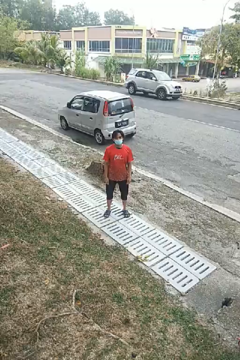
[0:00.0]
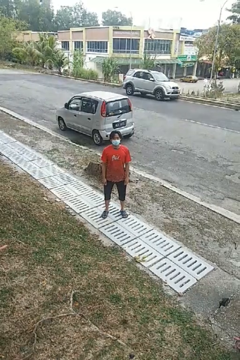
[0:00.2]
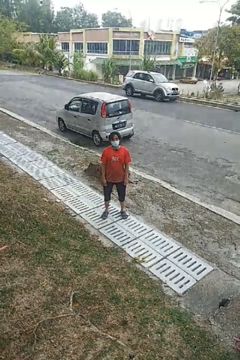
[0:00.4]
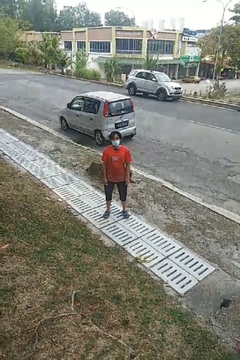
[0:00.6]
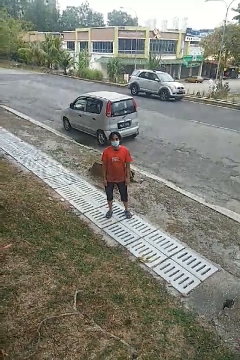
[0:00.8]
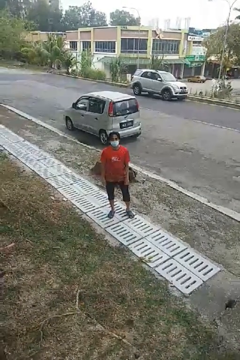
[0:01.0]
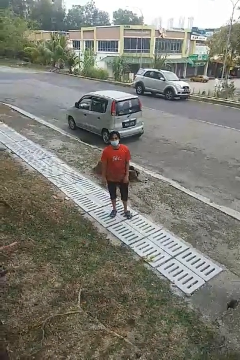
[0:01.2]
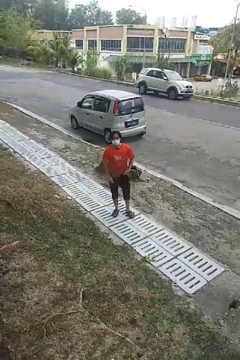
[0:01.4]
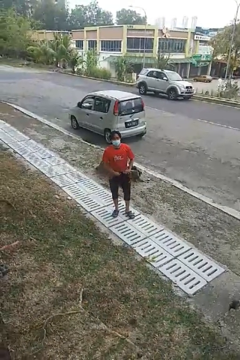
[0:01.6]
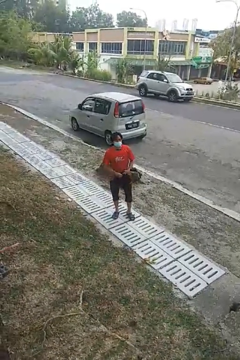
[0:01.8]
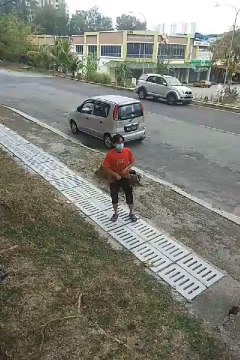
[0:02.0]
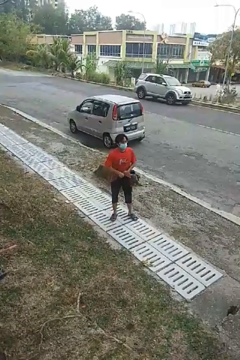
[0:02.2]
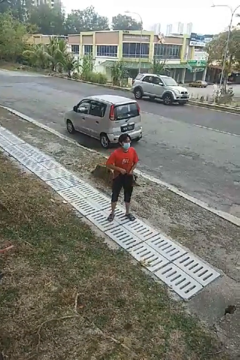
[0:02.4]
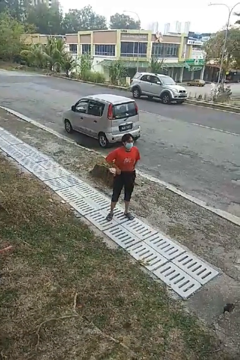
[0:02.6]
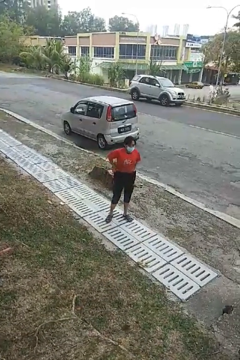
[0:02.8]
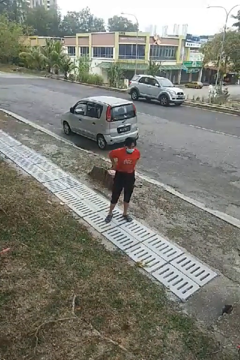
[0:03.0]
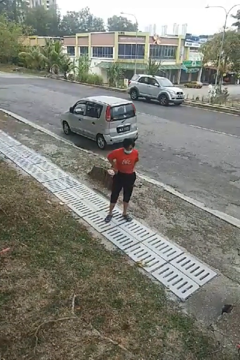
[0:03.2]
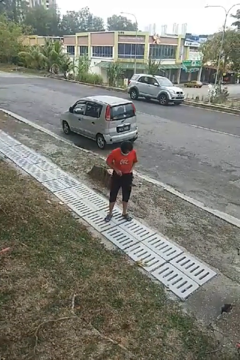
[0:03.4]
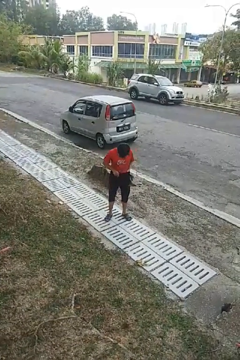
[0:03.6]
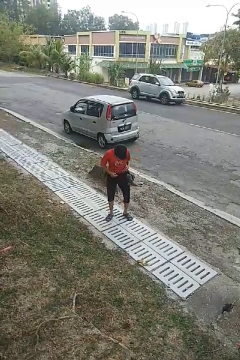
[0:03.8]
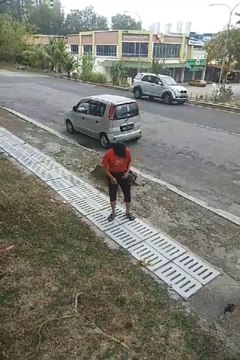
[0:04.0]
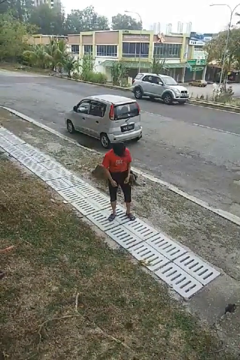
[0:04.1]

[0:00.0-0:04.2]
person tucks in shirt

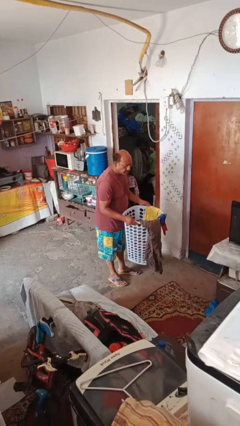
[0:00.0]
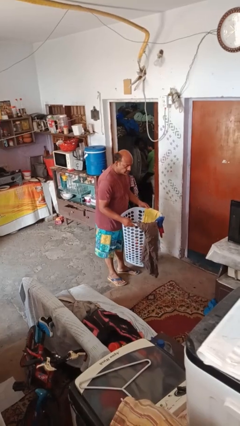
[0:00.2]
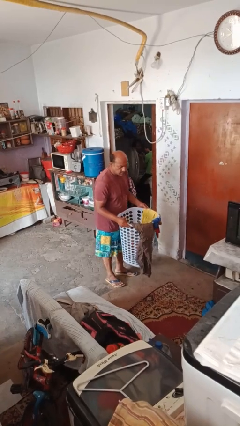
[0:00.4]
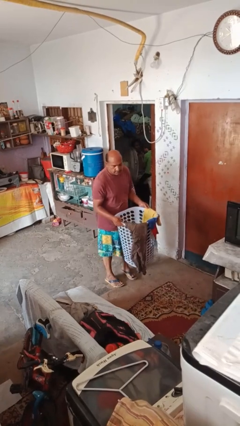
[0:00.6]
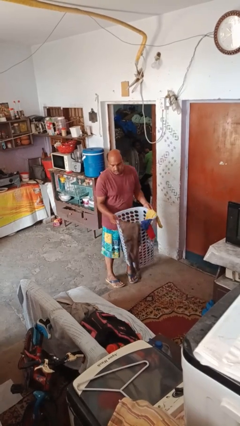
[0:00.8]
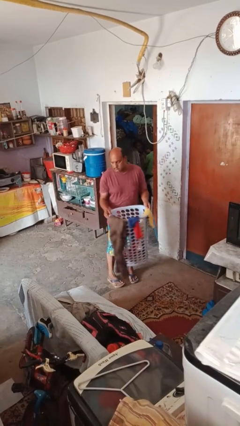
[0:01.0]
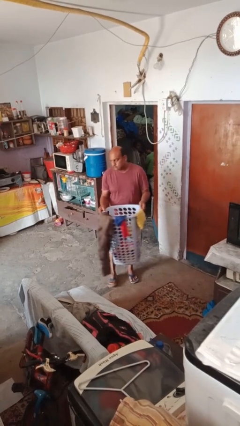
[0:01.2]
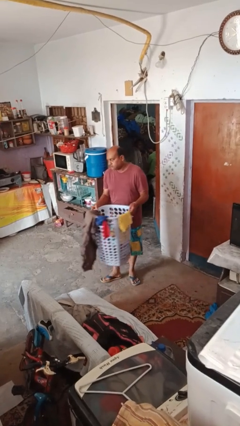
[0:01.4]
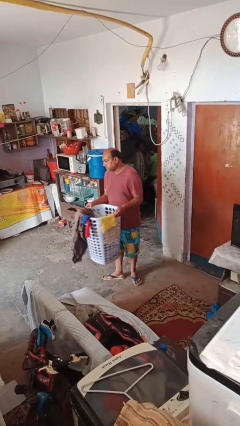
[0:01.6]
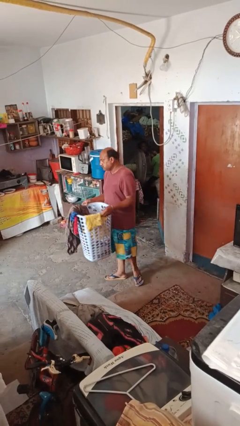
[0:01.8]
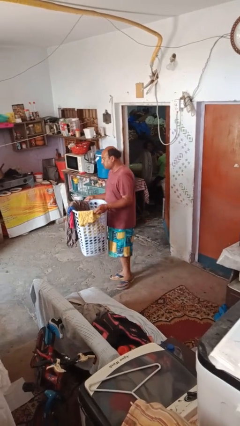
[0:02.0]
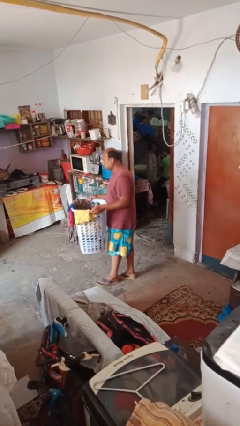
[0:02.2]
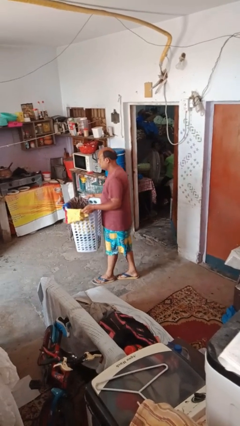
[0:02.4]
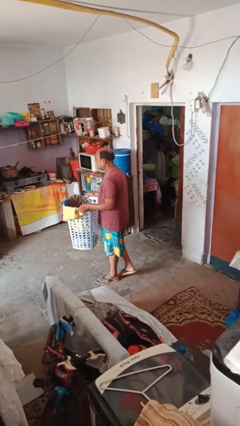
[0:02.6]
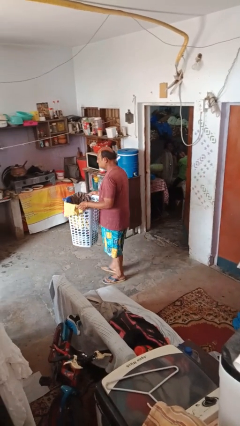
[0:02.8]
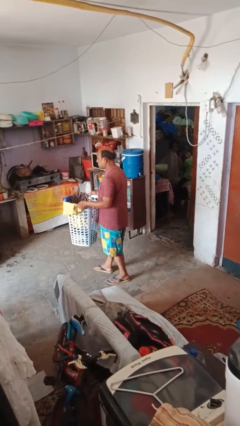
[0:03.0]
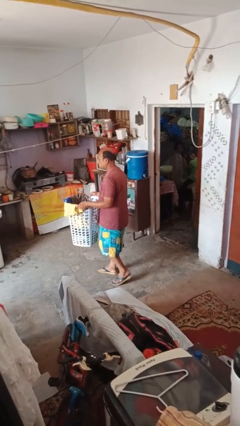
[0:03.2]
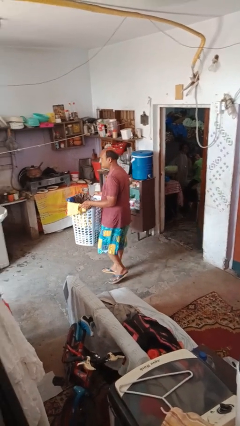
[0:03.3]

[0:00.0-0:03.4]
person carries laundry basket

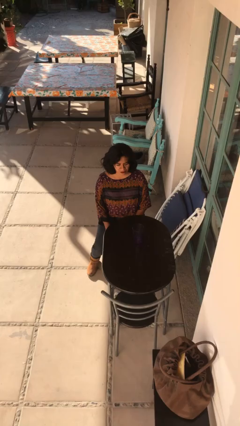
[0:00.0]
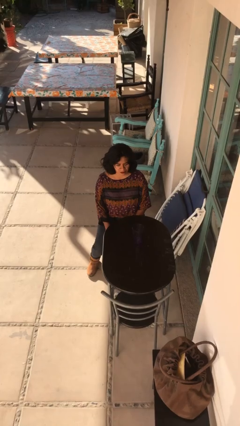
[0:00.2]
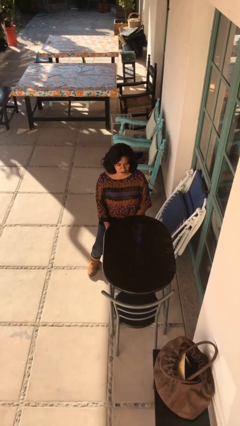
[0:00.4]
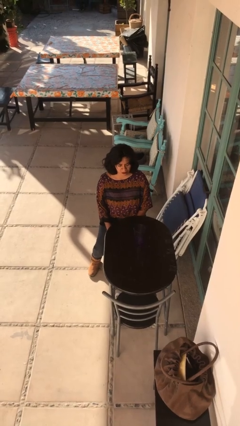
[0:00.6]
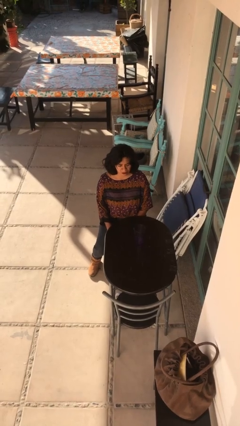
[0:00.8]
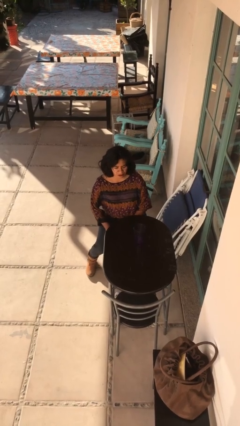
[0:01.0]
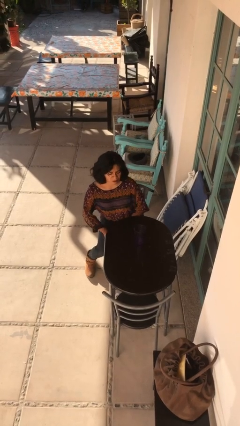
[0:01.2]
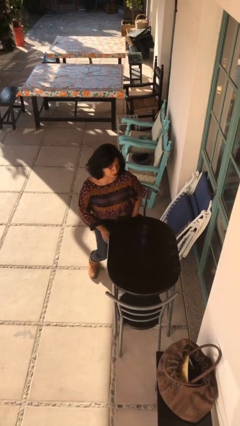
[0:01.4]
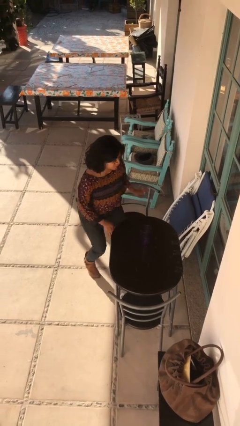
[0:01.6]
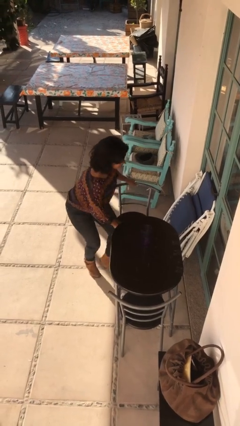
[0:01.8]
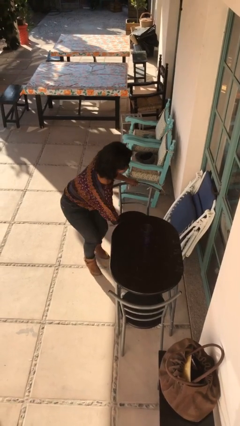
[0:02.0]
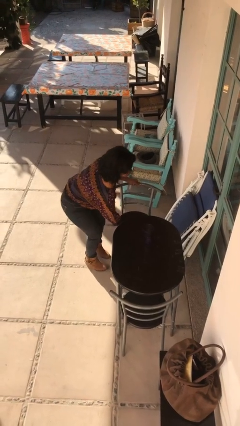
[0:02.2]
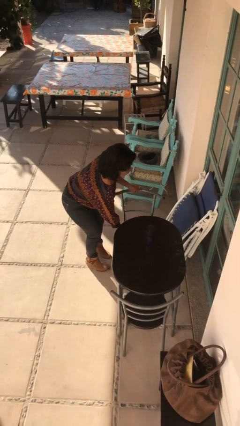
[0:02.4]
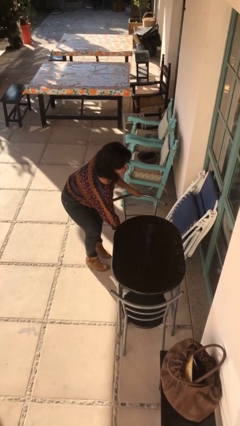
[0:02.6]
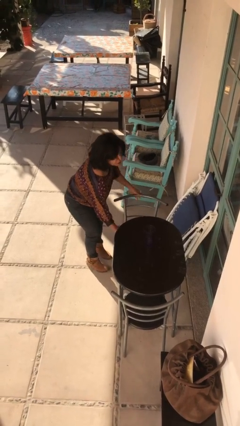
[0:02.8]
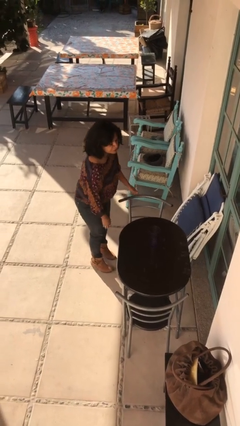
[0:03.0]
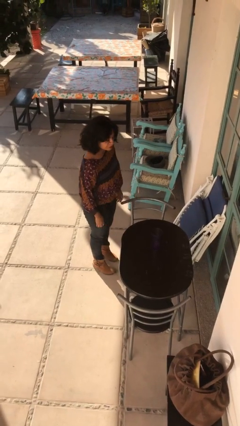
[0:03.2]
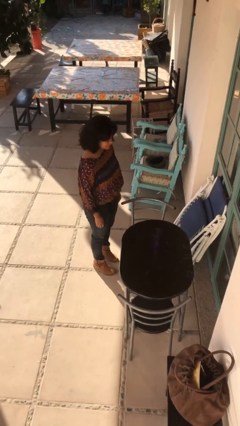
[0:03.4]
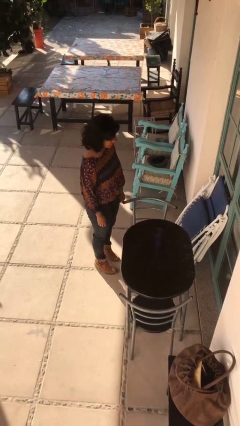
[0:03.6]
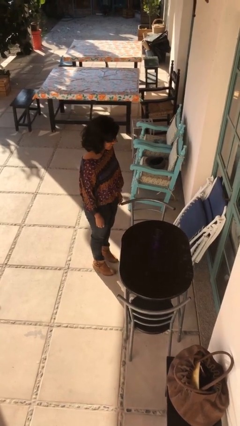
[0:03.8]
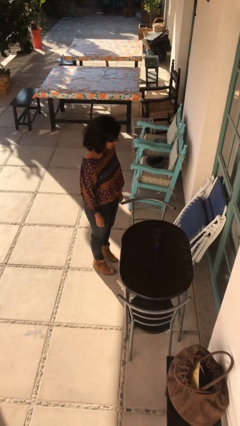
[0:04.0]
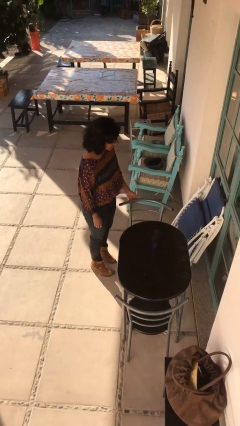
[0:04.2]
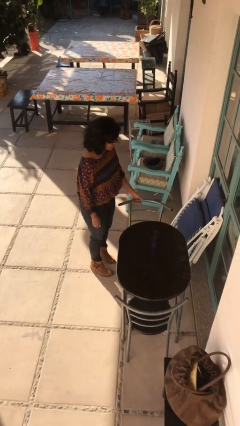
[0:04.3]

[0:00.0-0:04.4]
person stands up

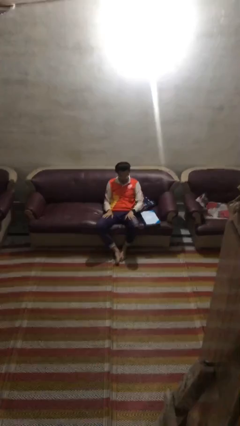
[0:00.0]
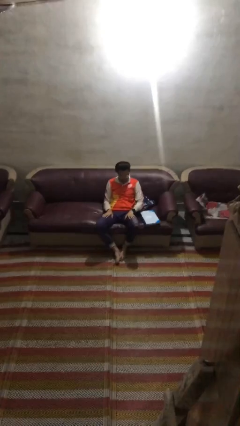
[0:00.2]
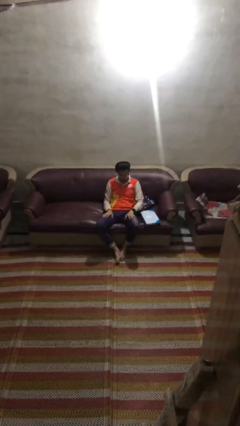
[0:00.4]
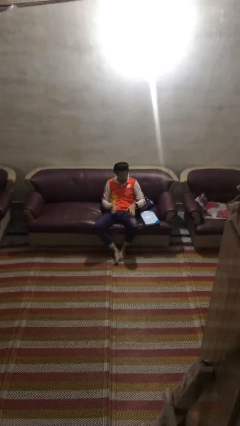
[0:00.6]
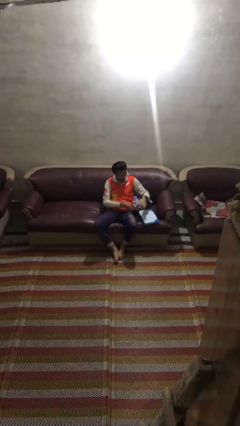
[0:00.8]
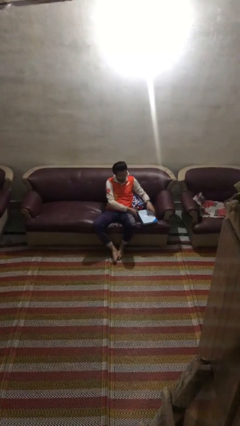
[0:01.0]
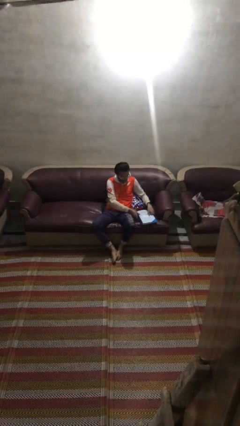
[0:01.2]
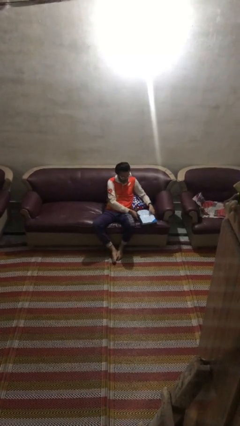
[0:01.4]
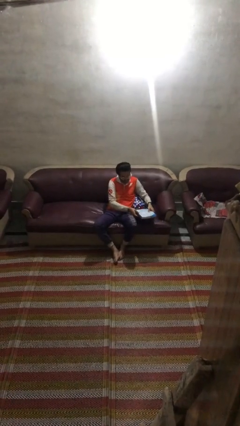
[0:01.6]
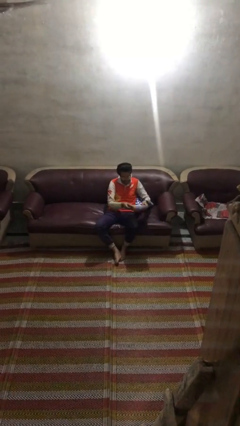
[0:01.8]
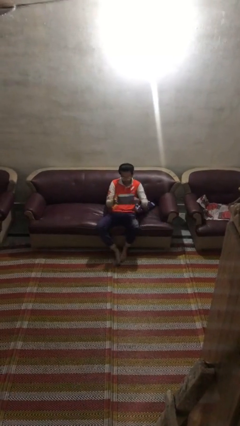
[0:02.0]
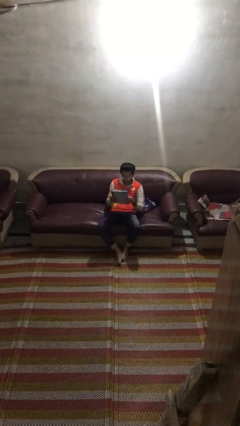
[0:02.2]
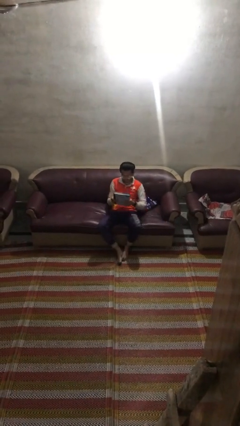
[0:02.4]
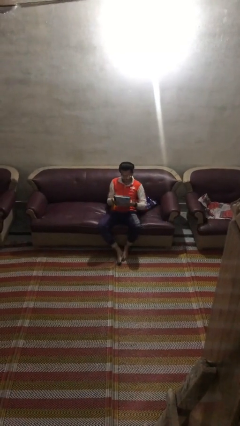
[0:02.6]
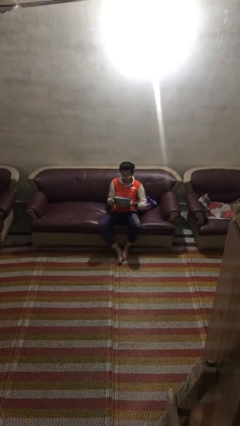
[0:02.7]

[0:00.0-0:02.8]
person picks up object from couch

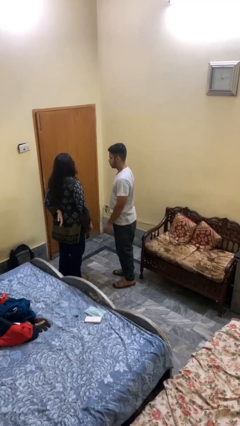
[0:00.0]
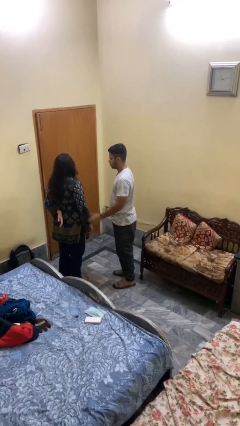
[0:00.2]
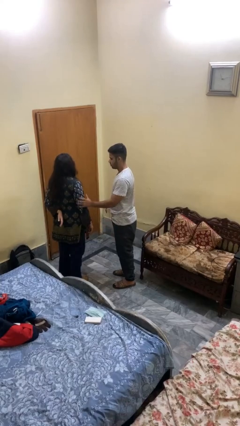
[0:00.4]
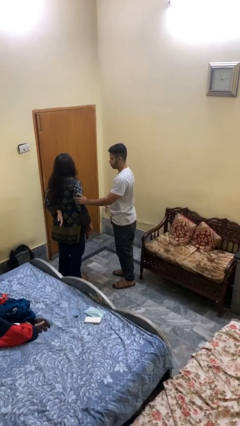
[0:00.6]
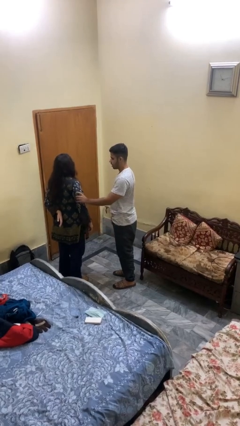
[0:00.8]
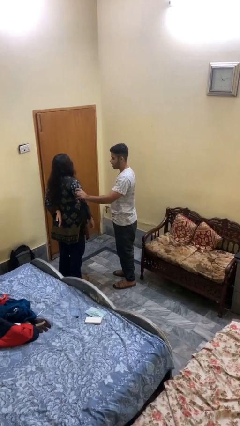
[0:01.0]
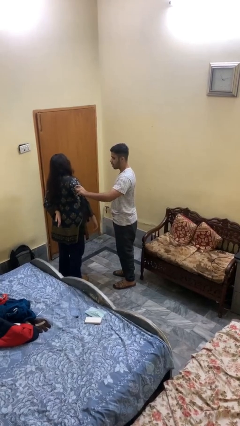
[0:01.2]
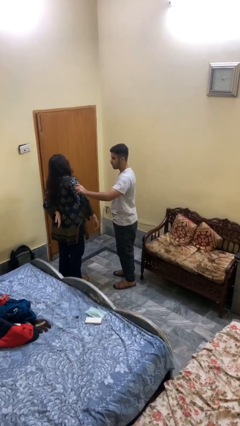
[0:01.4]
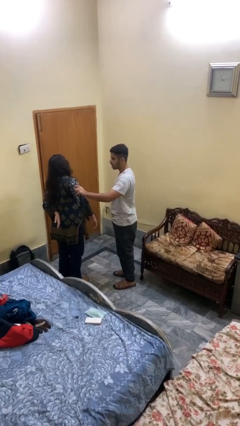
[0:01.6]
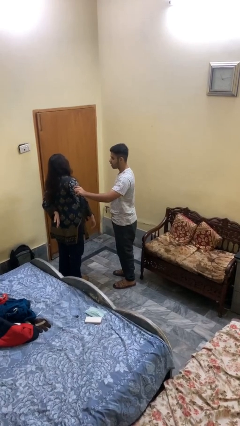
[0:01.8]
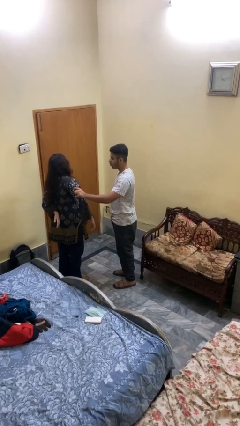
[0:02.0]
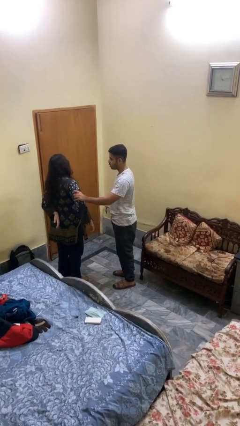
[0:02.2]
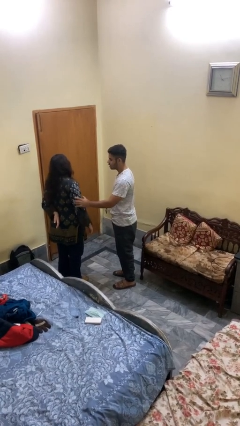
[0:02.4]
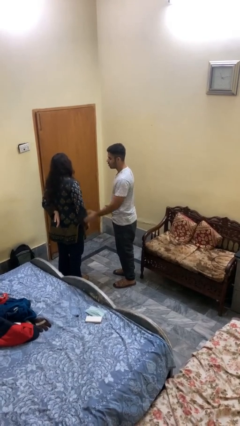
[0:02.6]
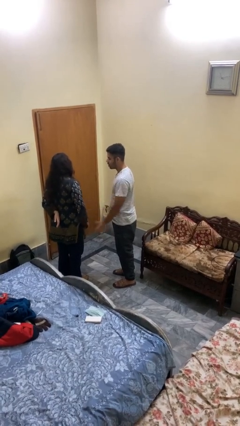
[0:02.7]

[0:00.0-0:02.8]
person grabs person by bicep

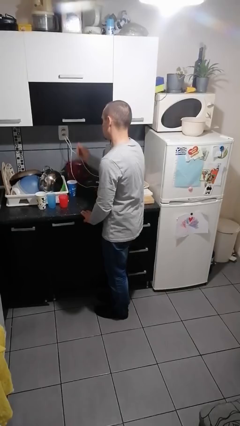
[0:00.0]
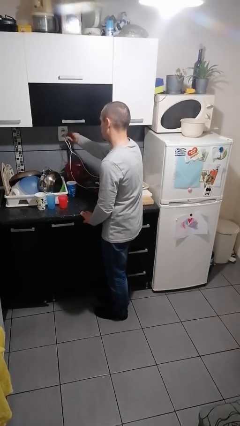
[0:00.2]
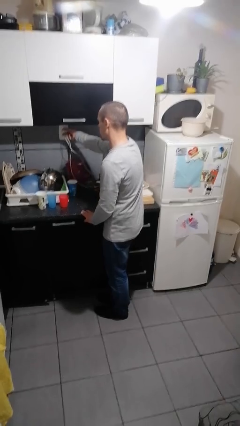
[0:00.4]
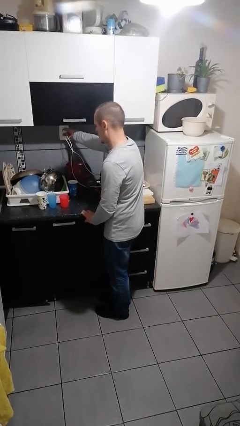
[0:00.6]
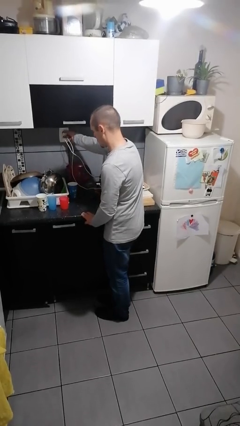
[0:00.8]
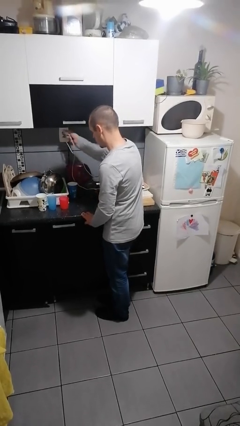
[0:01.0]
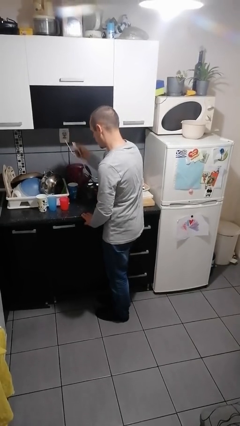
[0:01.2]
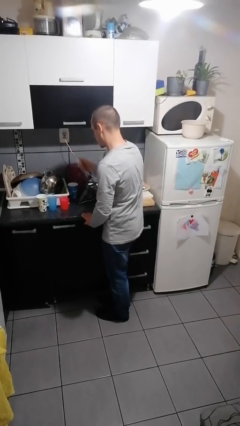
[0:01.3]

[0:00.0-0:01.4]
person unplugs from electrical socket
